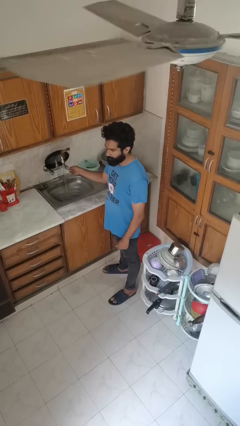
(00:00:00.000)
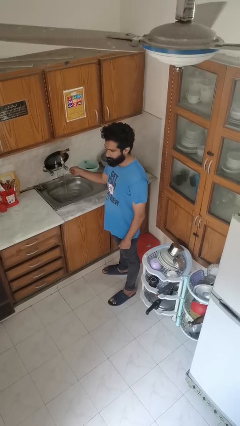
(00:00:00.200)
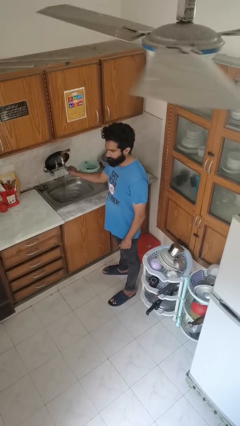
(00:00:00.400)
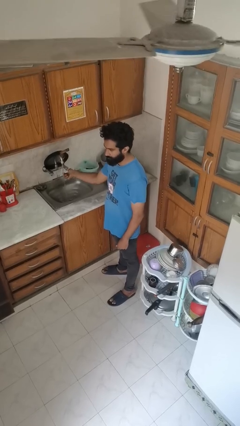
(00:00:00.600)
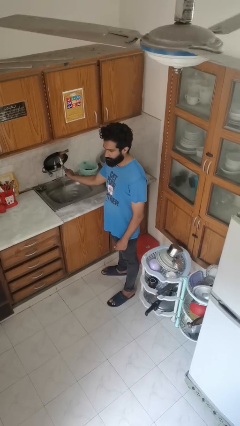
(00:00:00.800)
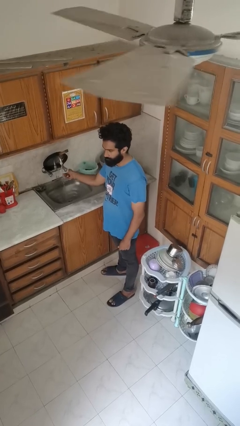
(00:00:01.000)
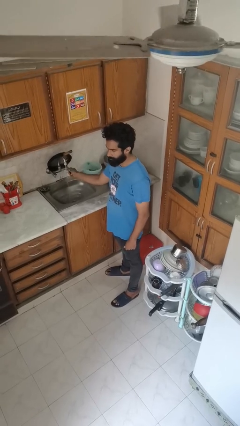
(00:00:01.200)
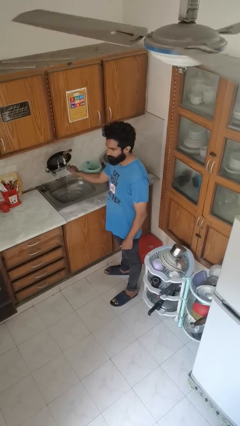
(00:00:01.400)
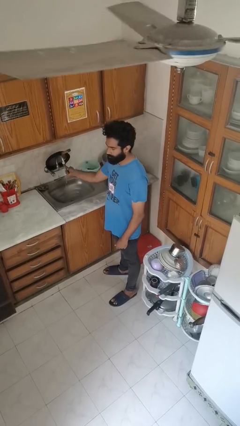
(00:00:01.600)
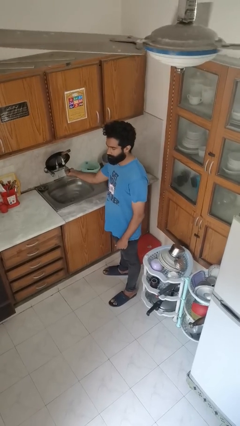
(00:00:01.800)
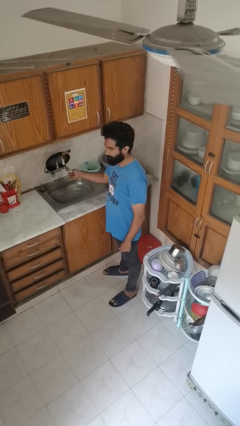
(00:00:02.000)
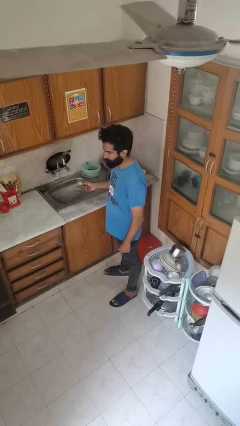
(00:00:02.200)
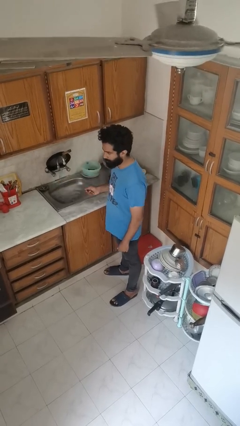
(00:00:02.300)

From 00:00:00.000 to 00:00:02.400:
person turns off faucet

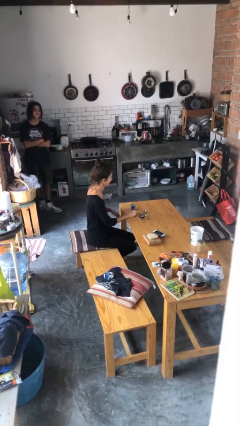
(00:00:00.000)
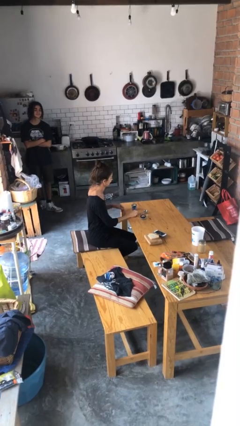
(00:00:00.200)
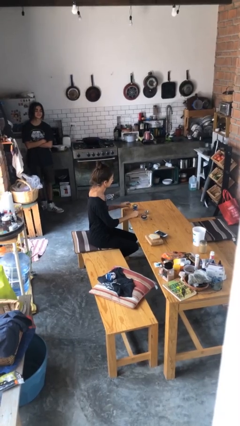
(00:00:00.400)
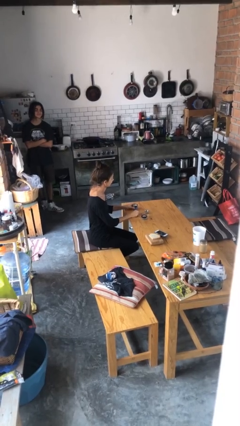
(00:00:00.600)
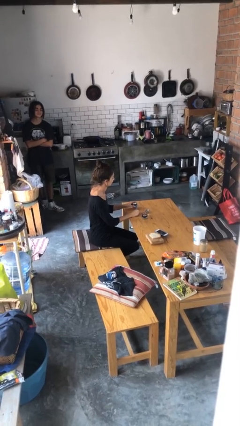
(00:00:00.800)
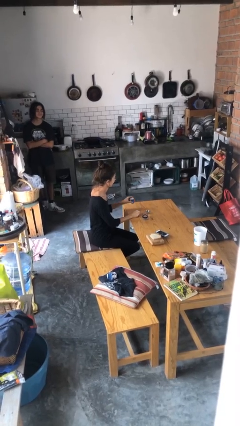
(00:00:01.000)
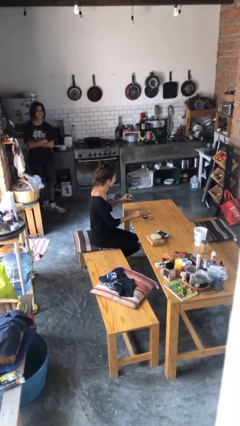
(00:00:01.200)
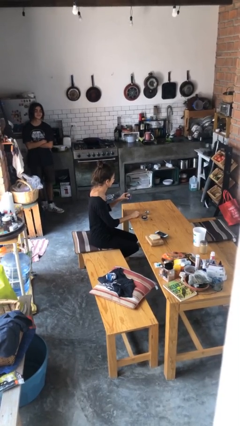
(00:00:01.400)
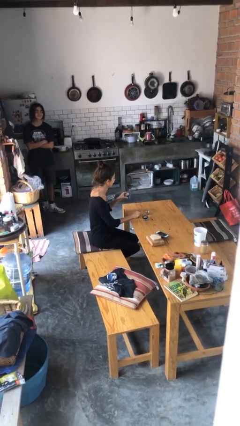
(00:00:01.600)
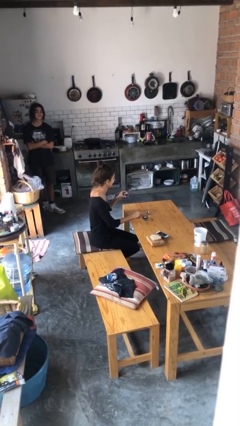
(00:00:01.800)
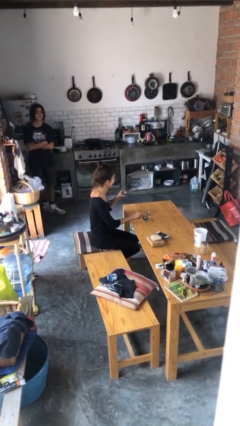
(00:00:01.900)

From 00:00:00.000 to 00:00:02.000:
person picks up object from table

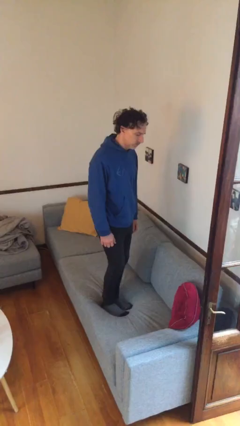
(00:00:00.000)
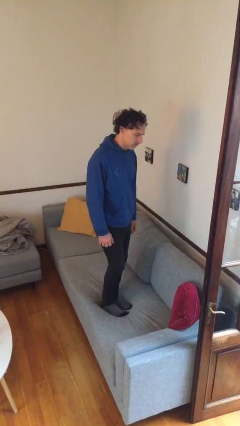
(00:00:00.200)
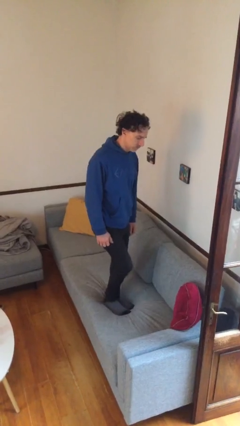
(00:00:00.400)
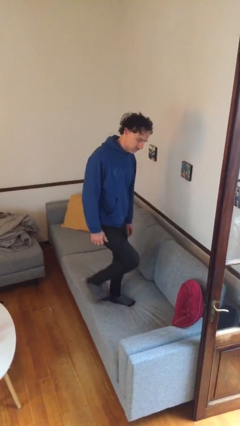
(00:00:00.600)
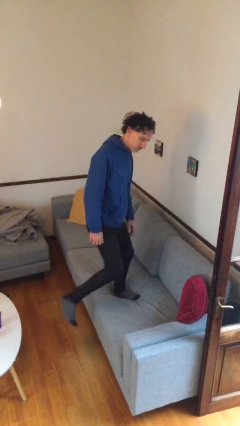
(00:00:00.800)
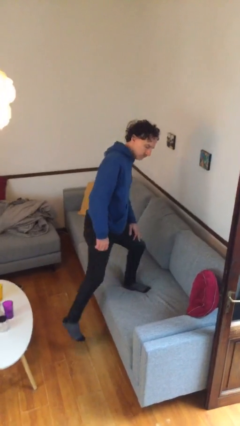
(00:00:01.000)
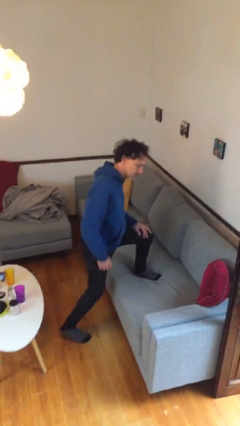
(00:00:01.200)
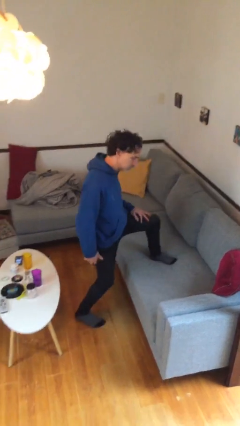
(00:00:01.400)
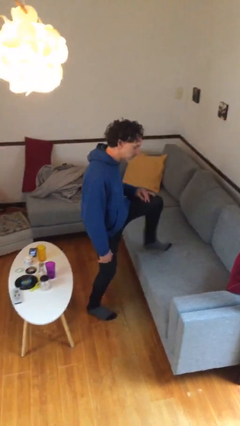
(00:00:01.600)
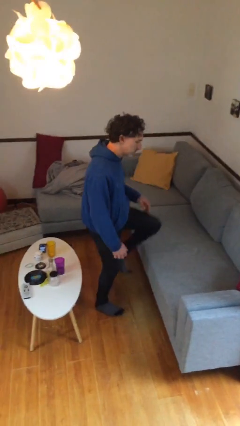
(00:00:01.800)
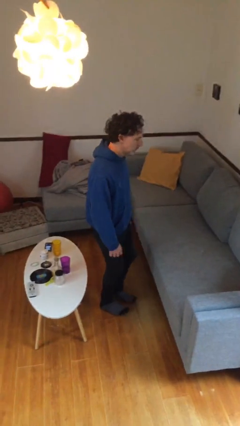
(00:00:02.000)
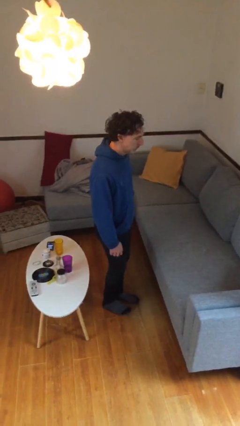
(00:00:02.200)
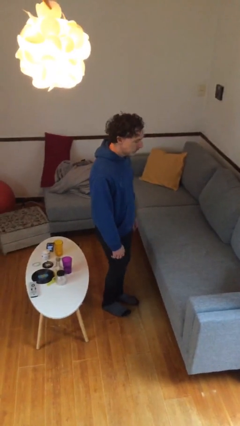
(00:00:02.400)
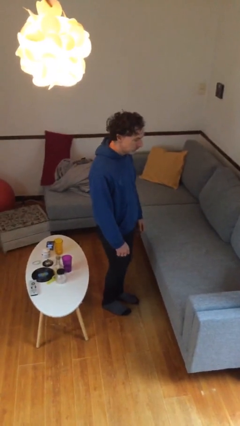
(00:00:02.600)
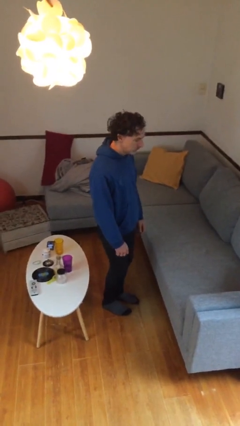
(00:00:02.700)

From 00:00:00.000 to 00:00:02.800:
person climbs off couch

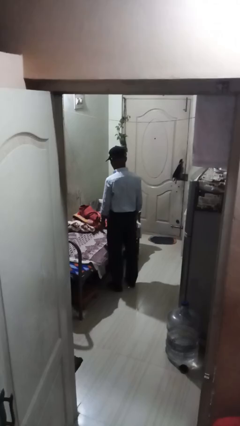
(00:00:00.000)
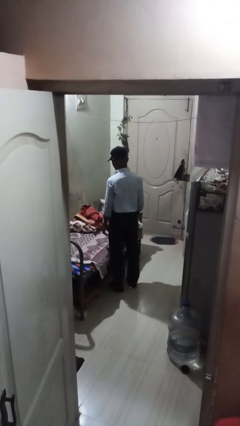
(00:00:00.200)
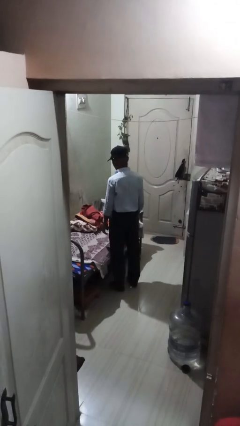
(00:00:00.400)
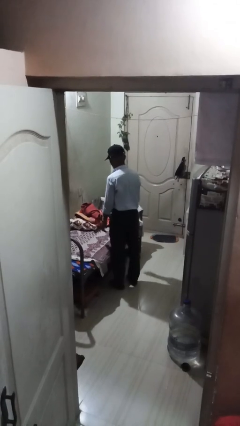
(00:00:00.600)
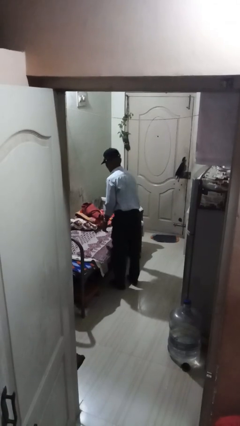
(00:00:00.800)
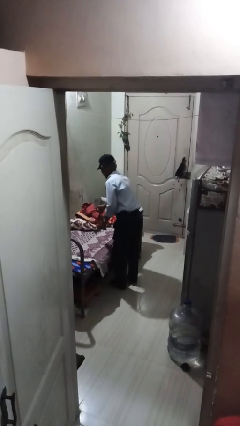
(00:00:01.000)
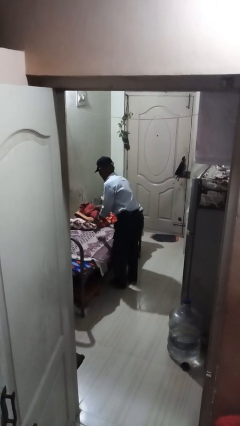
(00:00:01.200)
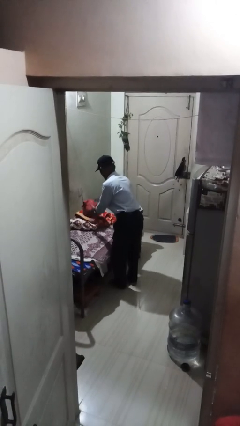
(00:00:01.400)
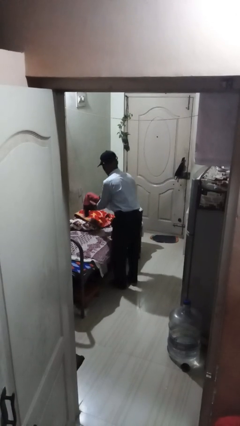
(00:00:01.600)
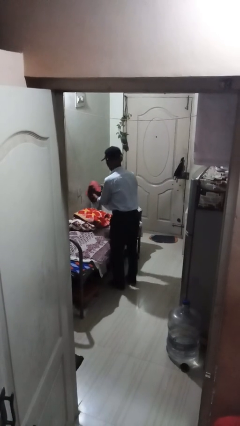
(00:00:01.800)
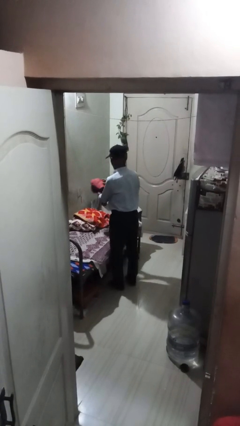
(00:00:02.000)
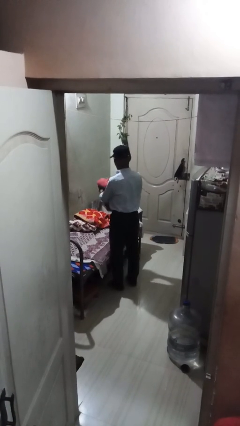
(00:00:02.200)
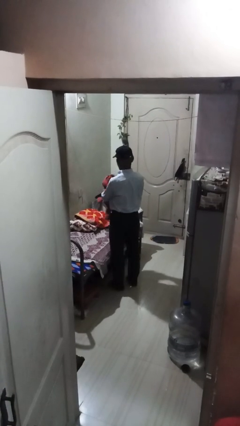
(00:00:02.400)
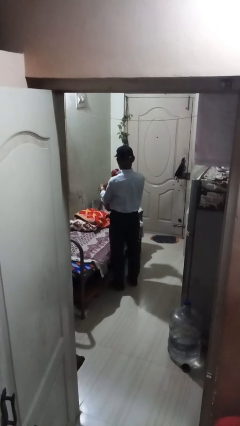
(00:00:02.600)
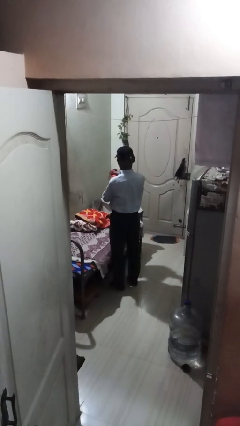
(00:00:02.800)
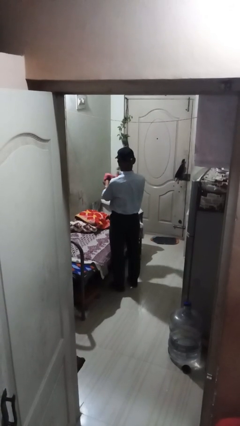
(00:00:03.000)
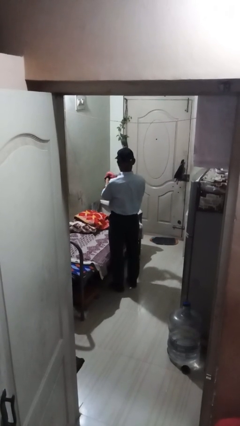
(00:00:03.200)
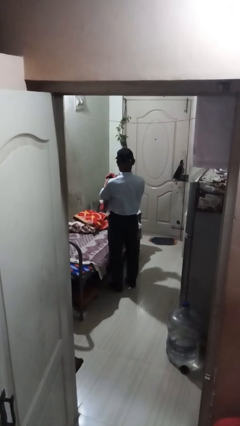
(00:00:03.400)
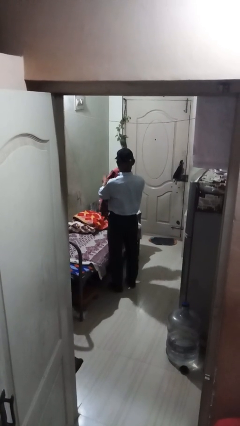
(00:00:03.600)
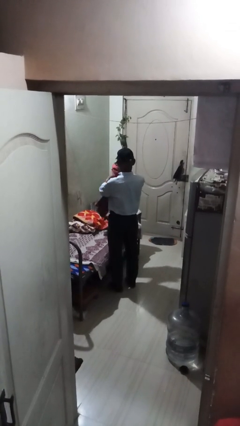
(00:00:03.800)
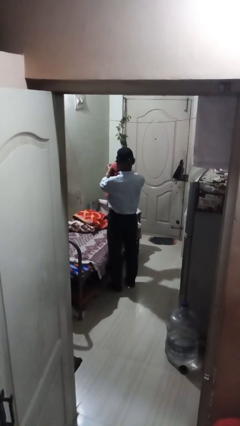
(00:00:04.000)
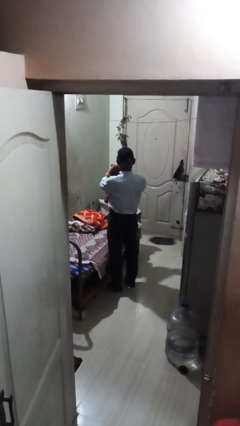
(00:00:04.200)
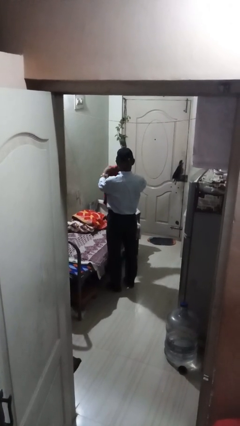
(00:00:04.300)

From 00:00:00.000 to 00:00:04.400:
person folds shirt

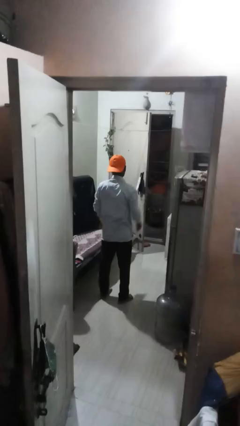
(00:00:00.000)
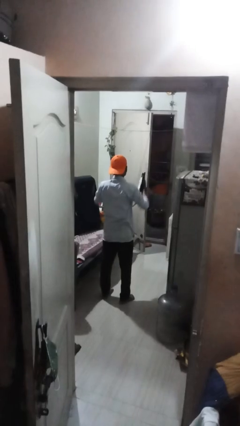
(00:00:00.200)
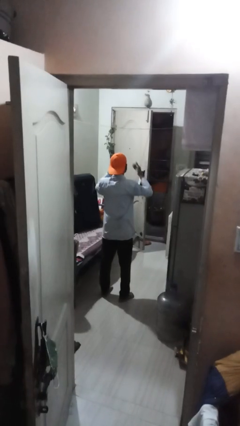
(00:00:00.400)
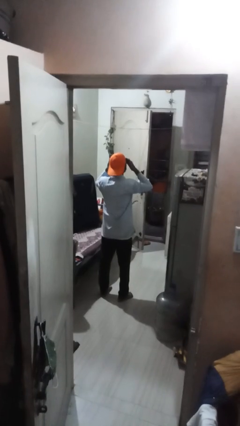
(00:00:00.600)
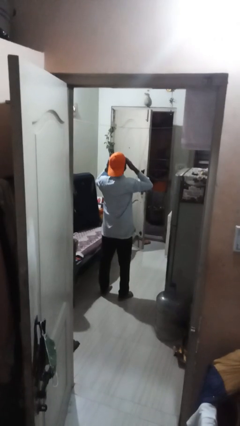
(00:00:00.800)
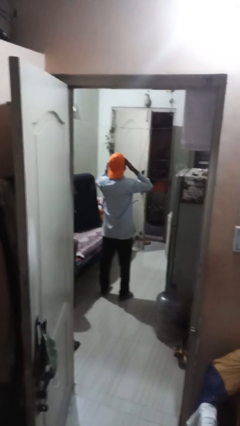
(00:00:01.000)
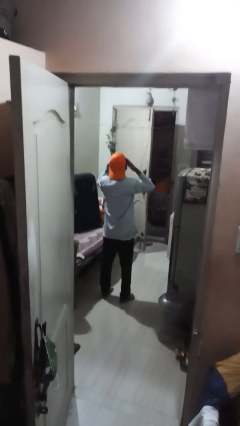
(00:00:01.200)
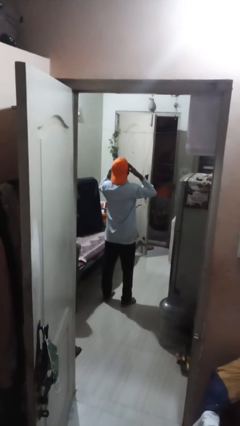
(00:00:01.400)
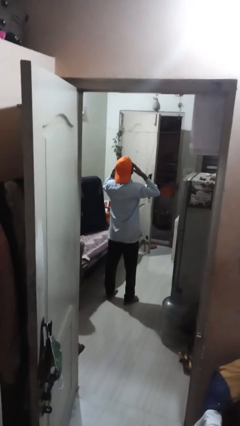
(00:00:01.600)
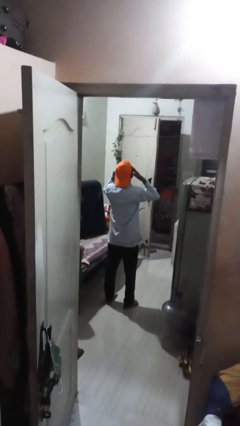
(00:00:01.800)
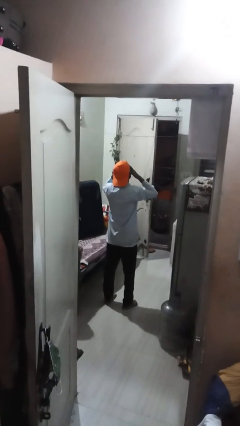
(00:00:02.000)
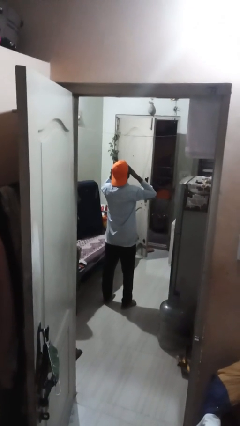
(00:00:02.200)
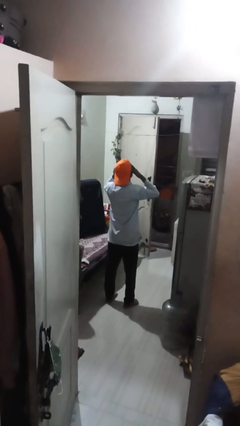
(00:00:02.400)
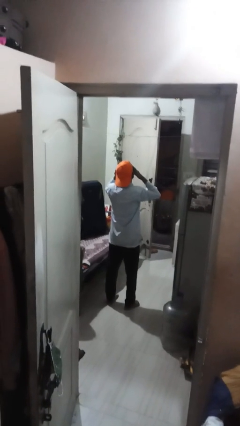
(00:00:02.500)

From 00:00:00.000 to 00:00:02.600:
person covers face with hands

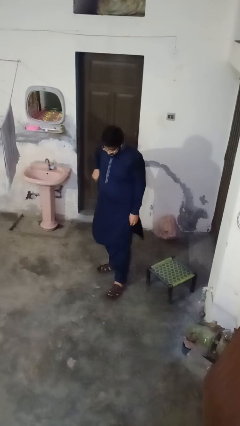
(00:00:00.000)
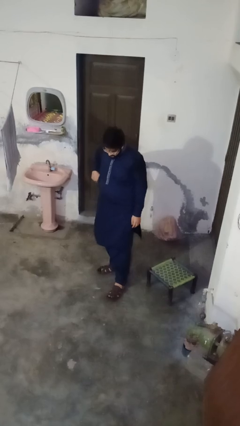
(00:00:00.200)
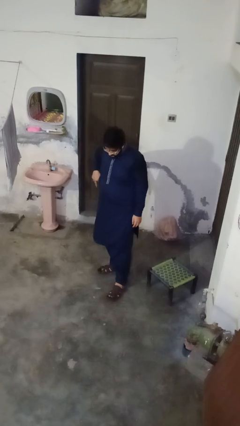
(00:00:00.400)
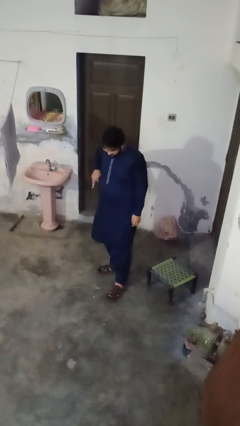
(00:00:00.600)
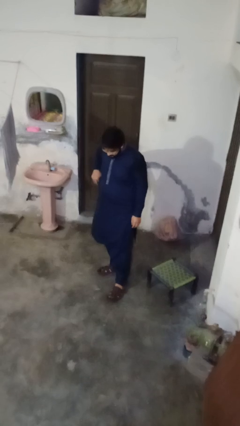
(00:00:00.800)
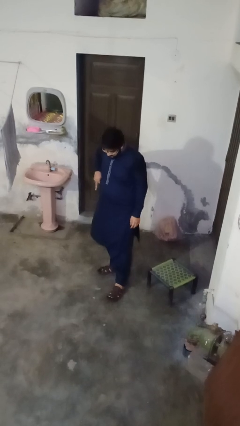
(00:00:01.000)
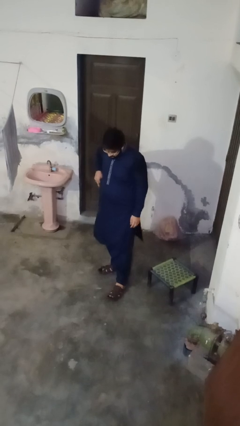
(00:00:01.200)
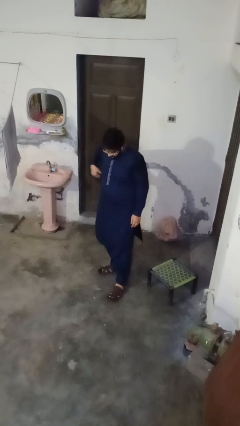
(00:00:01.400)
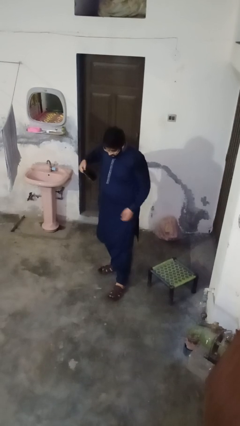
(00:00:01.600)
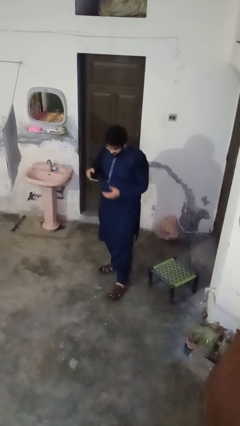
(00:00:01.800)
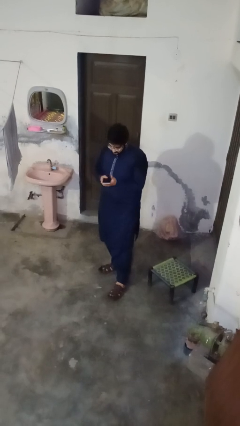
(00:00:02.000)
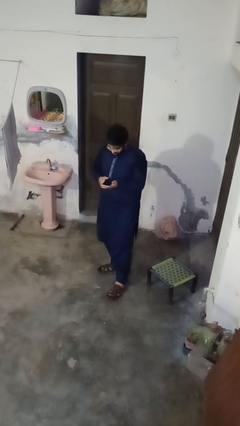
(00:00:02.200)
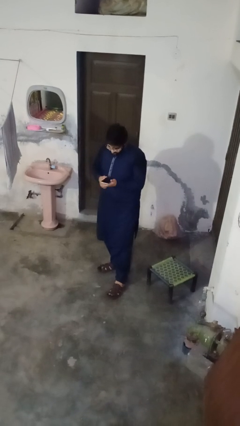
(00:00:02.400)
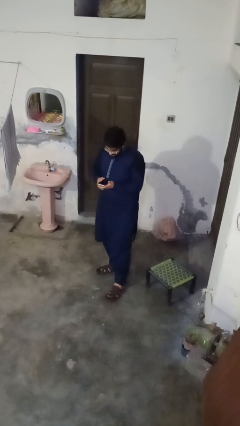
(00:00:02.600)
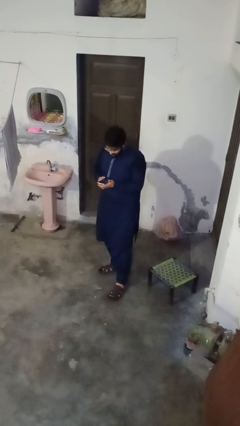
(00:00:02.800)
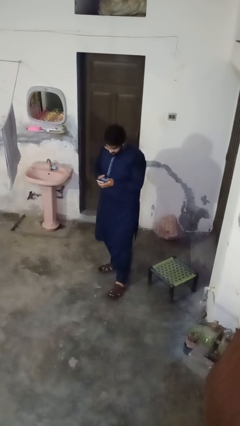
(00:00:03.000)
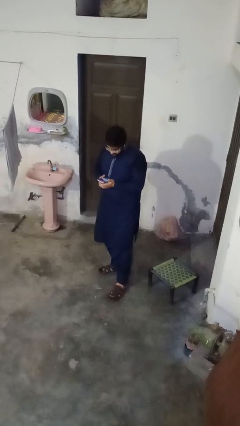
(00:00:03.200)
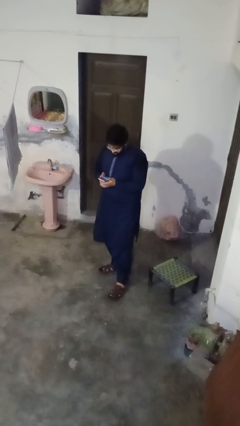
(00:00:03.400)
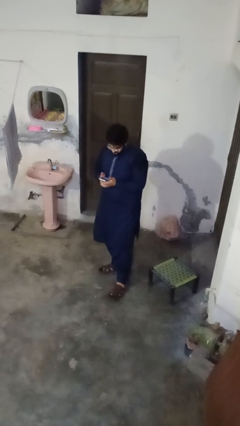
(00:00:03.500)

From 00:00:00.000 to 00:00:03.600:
person takes phone from pocket
